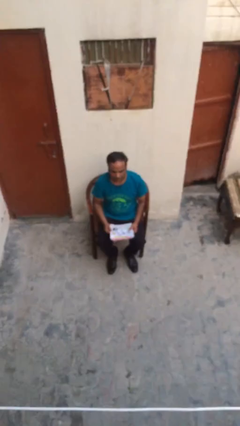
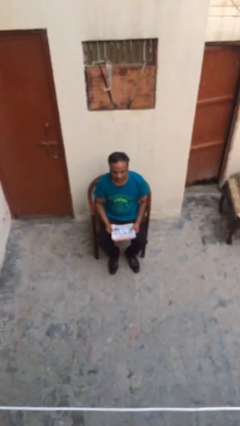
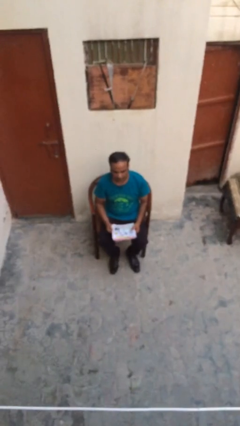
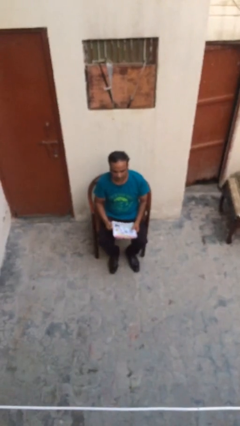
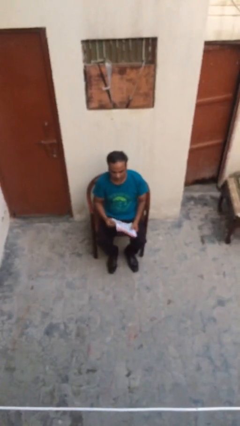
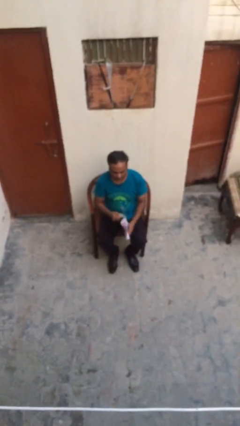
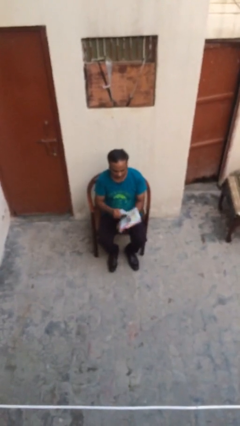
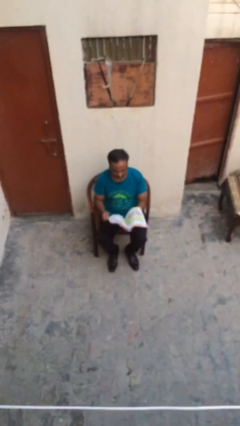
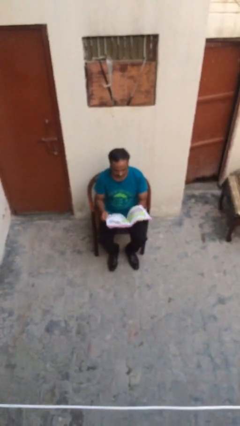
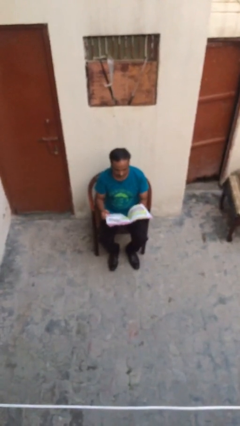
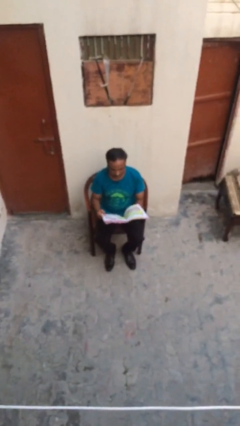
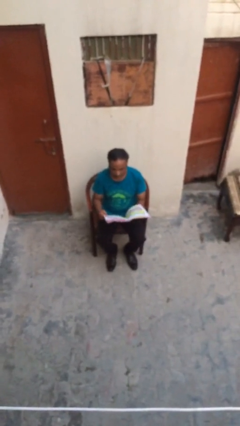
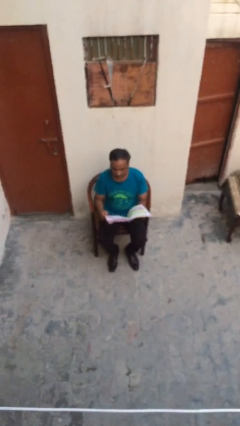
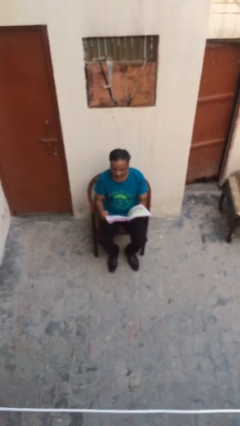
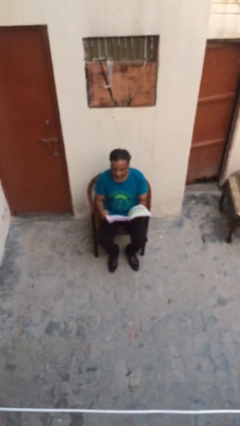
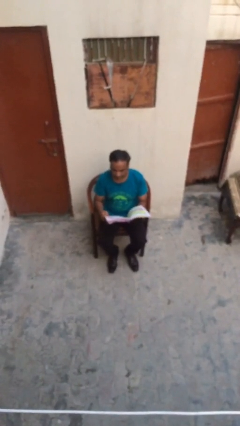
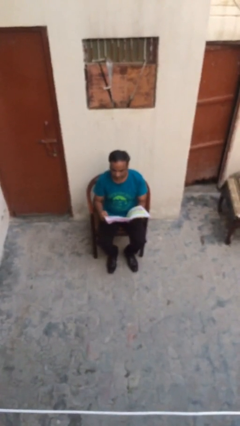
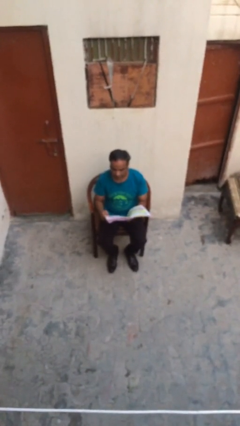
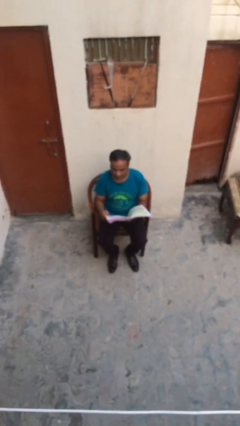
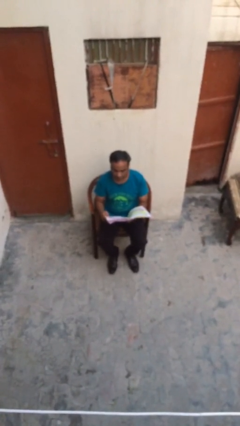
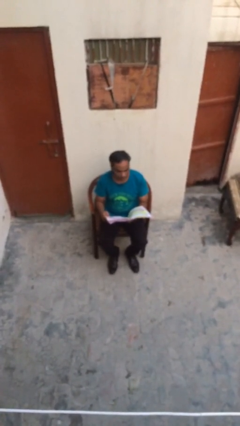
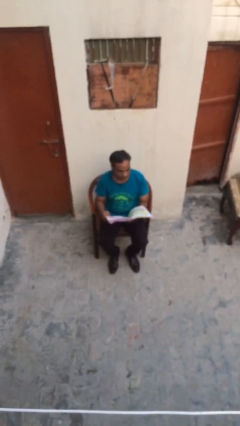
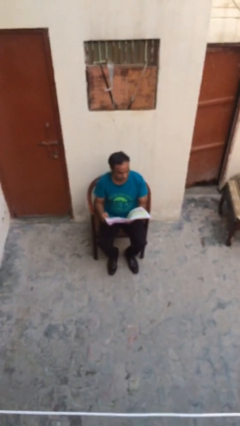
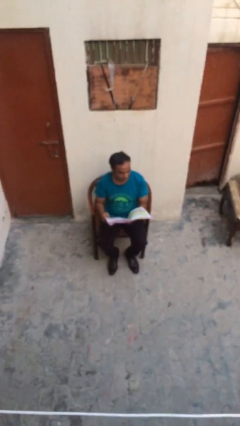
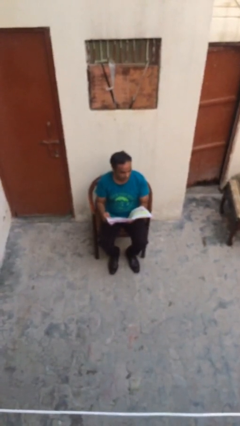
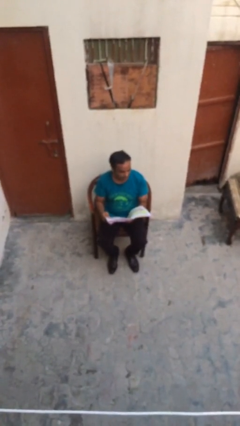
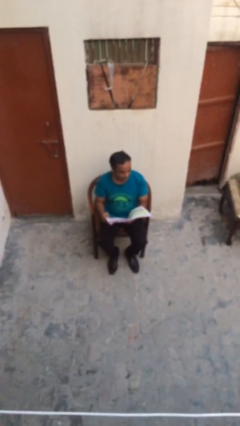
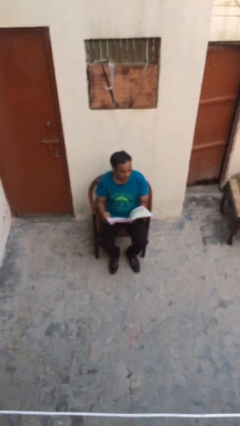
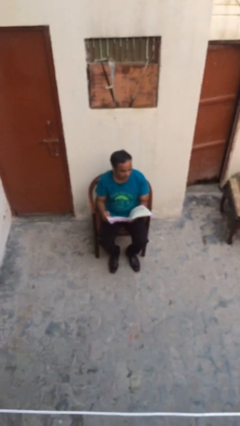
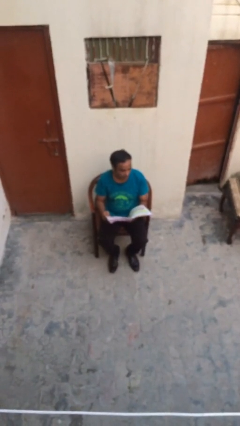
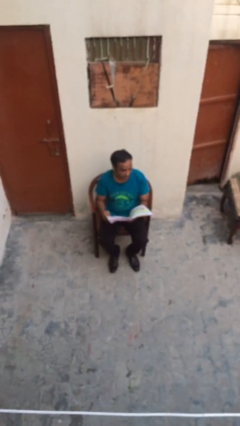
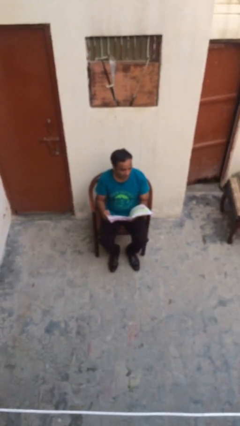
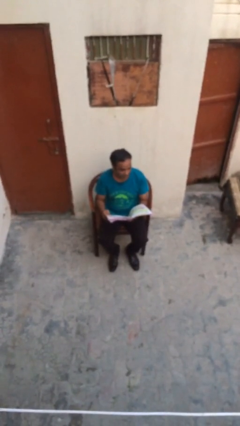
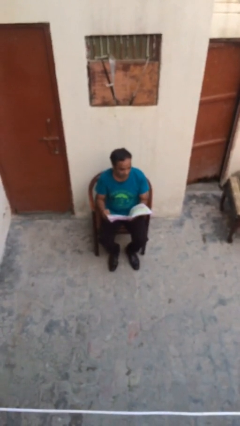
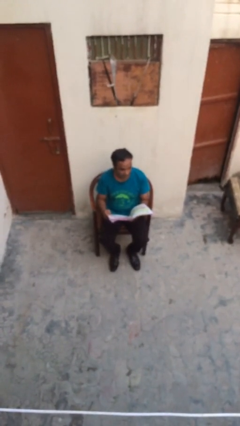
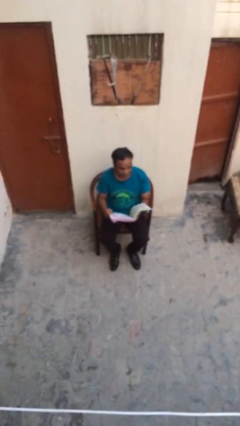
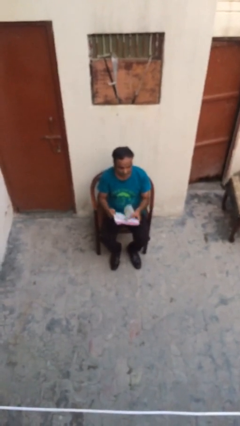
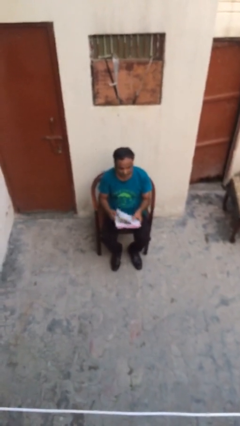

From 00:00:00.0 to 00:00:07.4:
person reads document

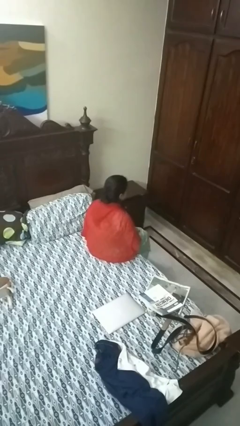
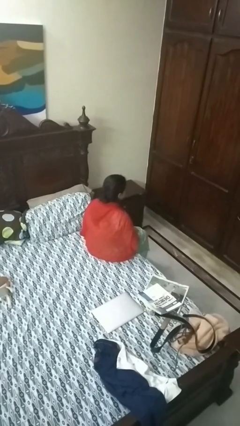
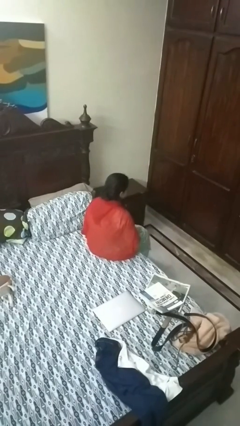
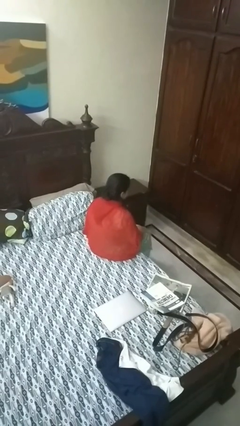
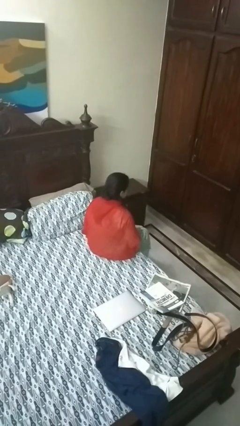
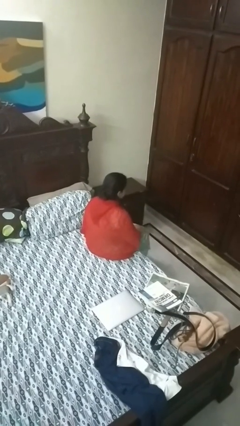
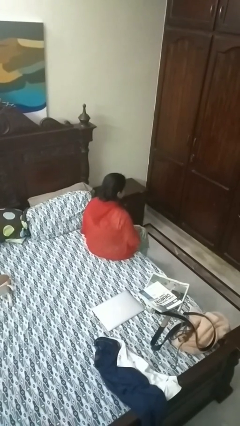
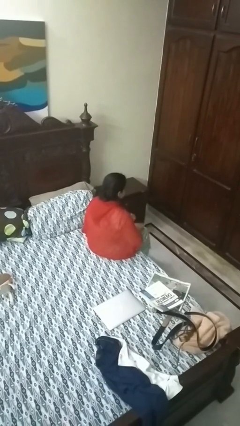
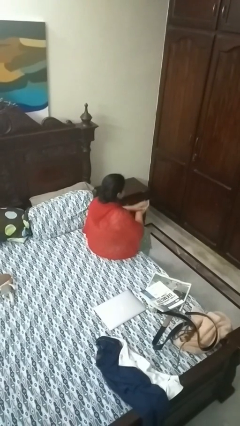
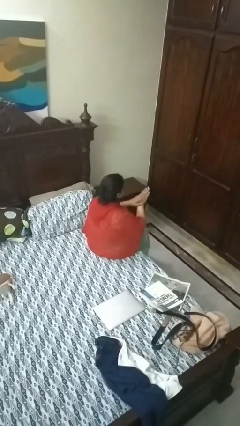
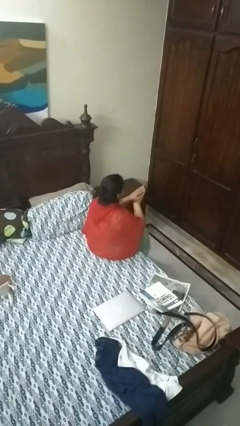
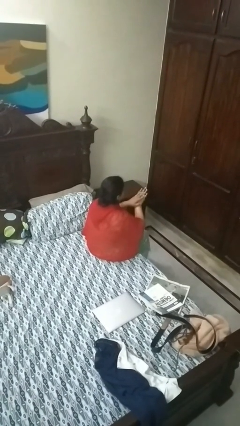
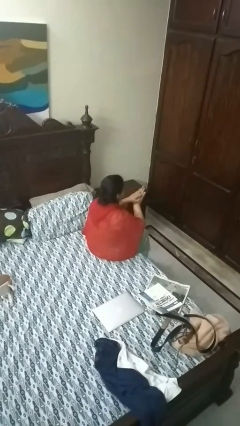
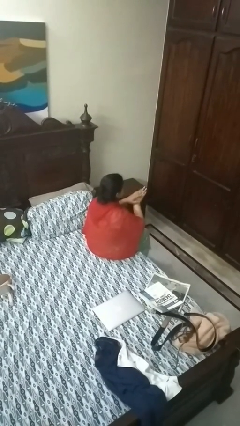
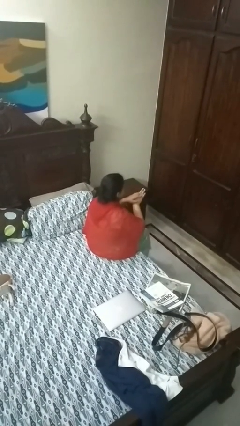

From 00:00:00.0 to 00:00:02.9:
person looks at hands in lap

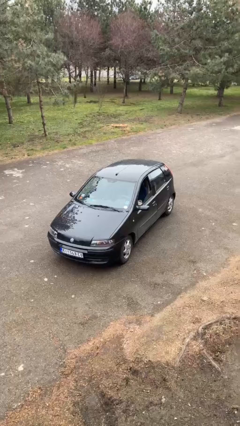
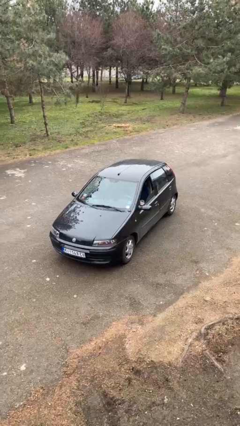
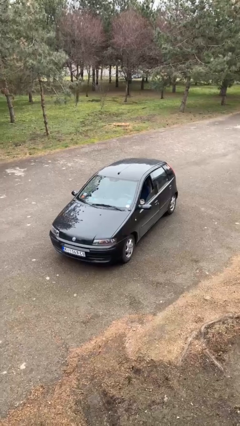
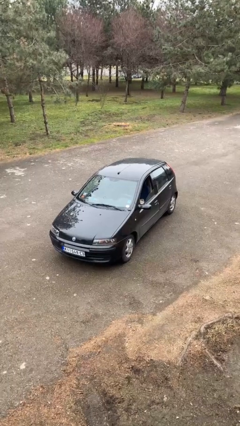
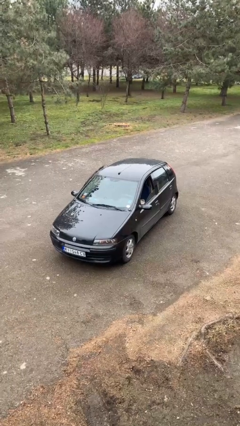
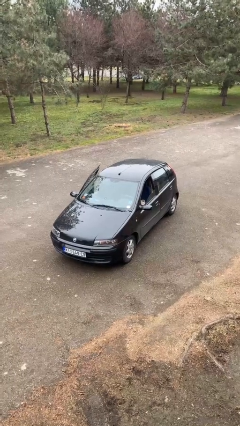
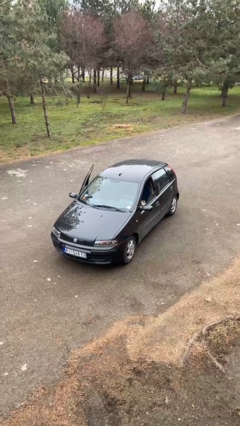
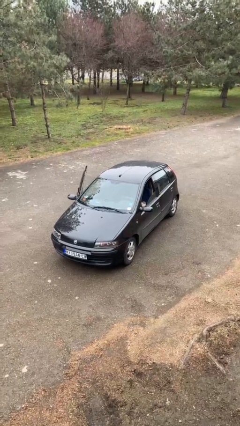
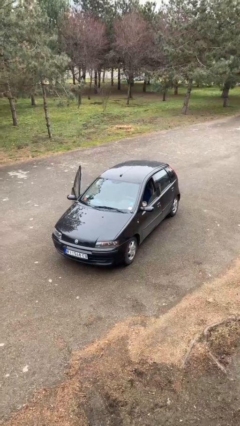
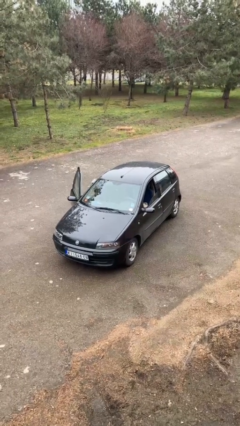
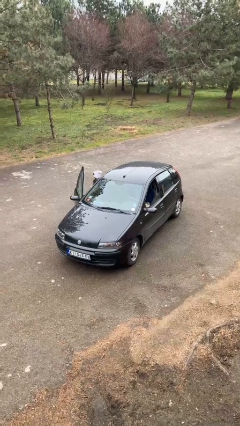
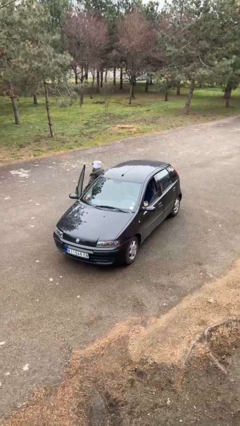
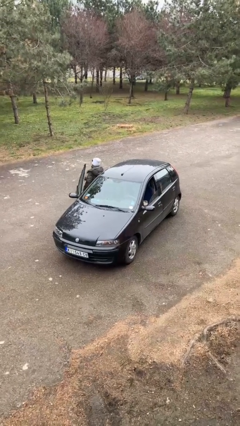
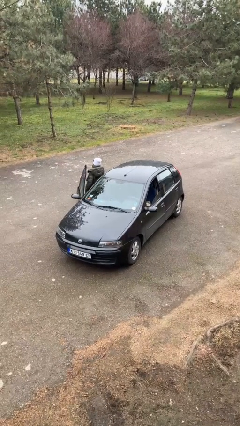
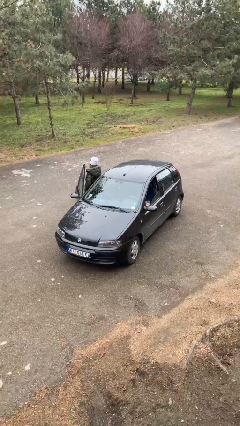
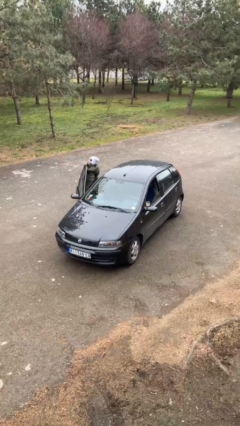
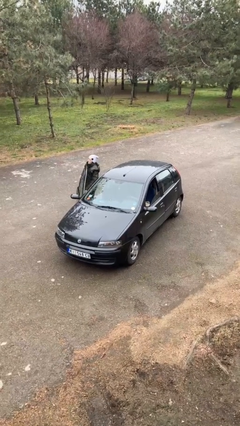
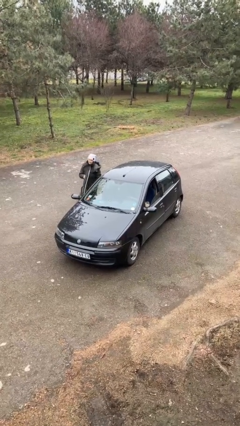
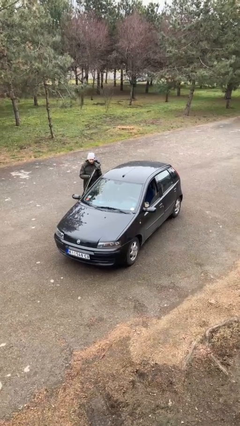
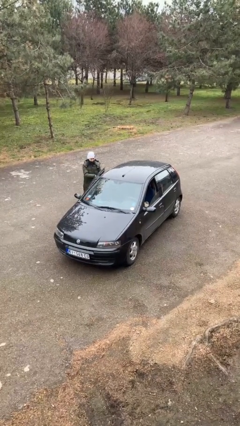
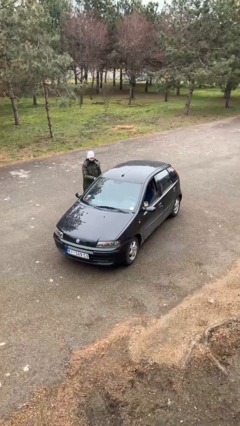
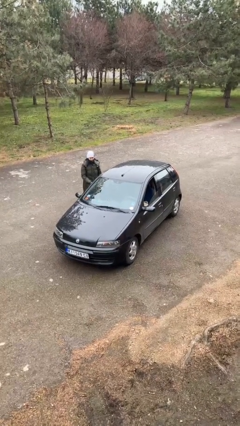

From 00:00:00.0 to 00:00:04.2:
car drops off person

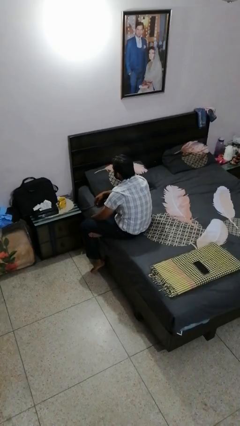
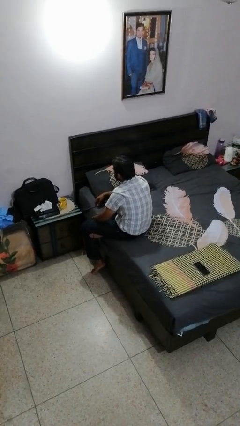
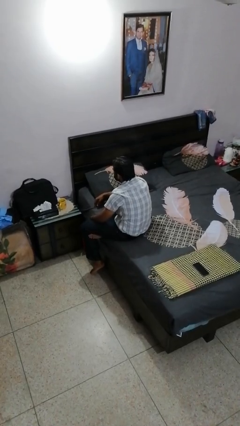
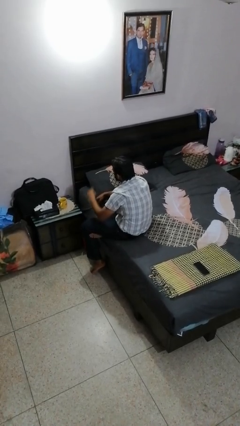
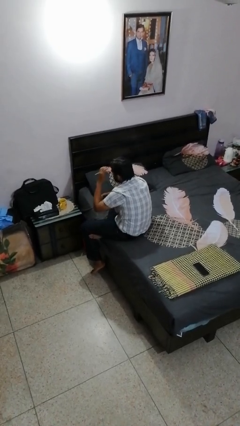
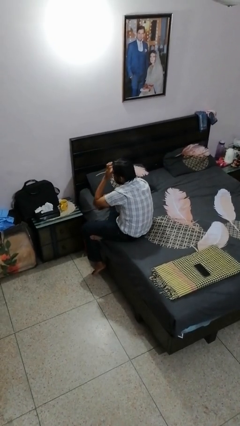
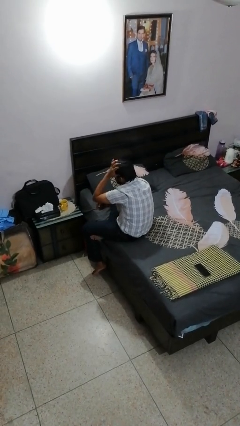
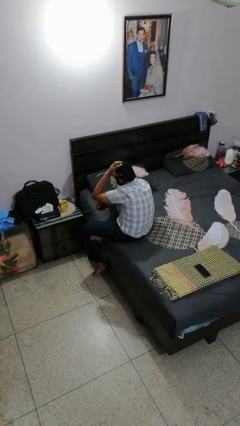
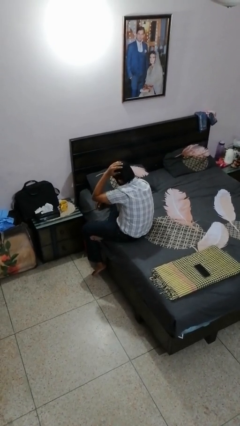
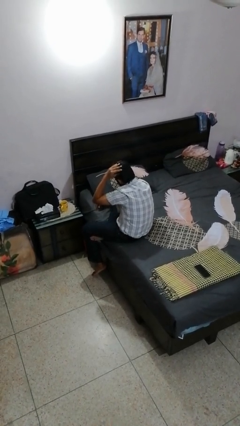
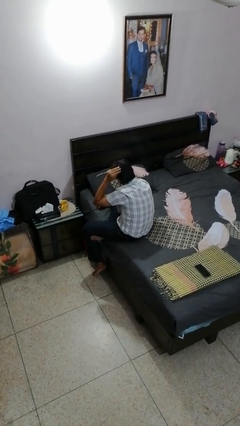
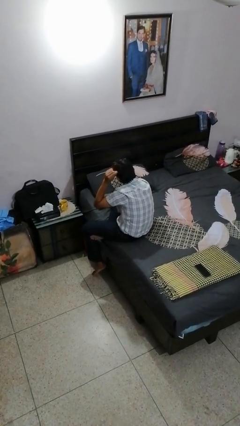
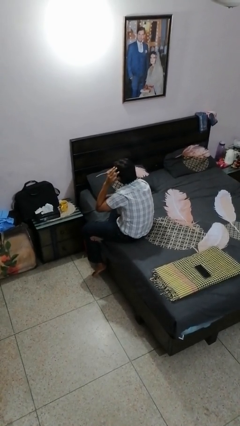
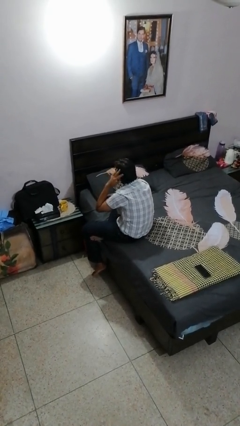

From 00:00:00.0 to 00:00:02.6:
person strokes hair

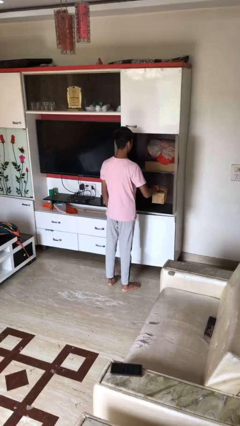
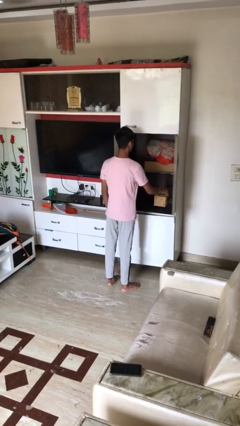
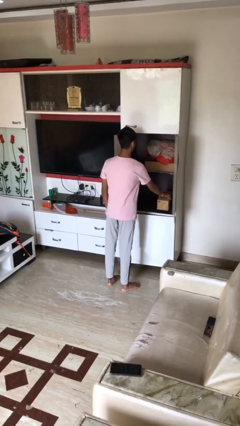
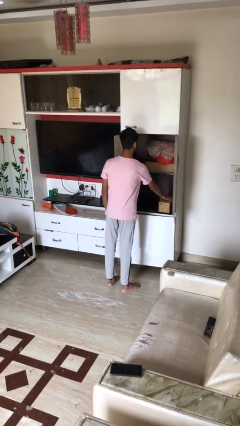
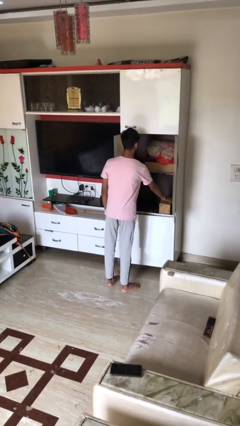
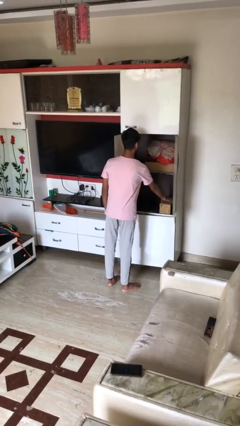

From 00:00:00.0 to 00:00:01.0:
person puts down object into cabinet
